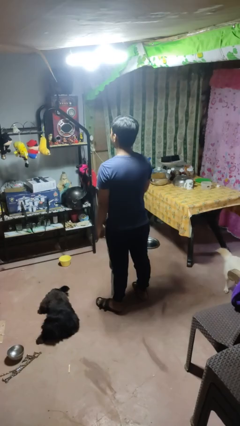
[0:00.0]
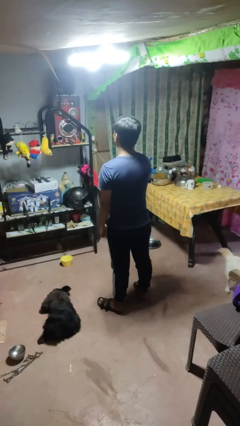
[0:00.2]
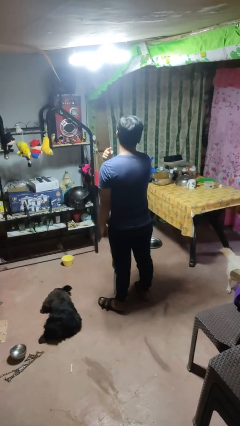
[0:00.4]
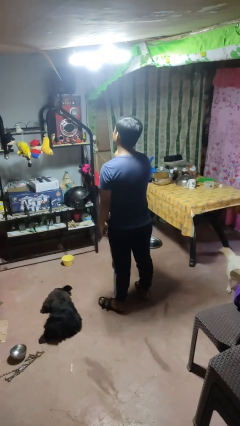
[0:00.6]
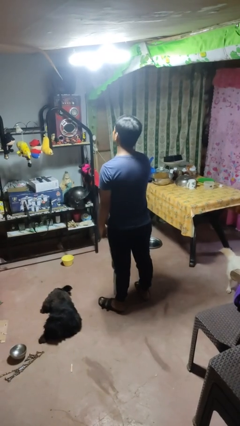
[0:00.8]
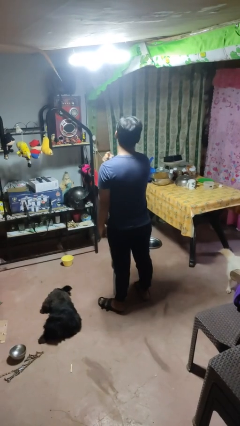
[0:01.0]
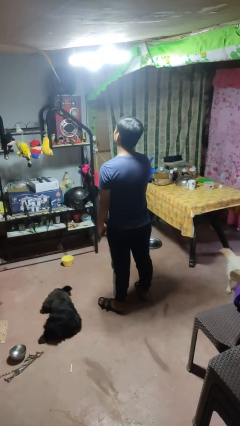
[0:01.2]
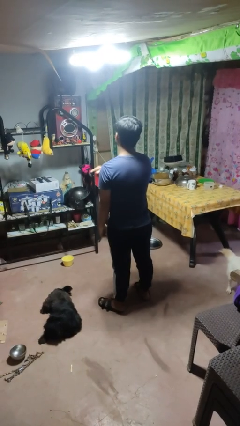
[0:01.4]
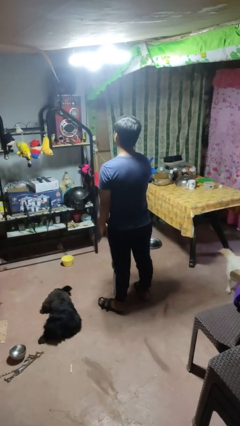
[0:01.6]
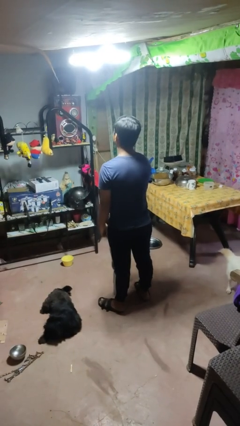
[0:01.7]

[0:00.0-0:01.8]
person gestures cut

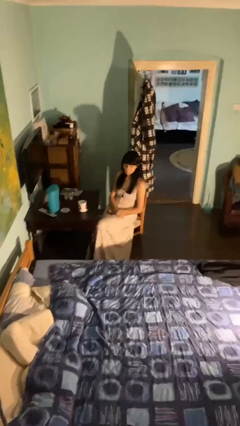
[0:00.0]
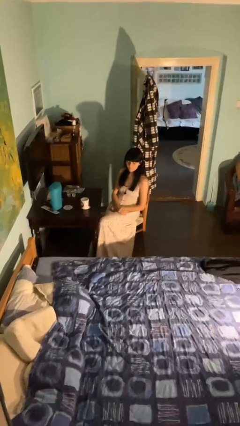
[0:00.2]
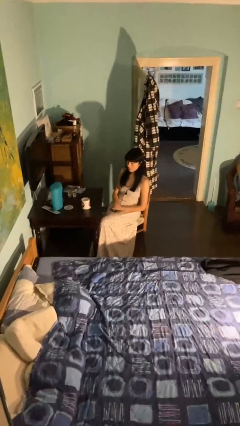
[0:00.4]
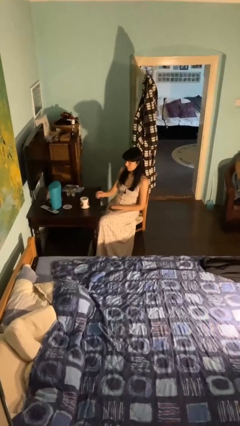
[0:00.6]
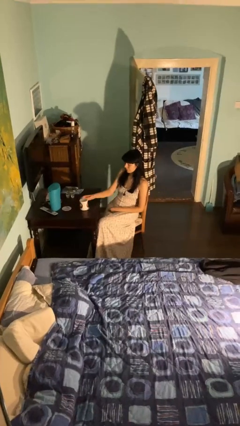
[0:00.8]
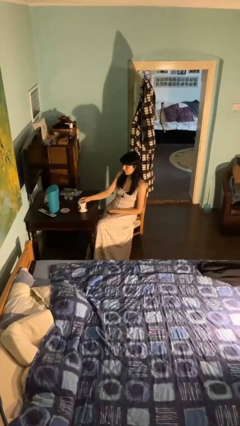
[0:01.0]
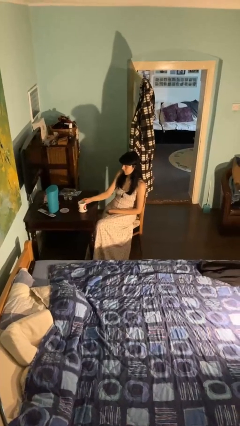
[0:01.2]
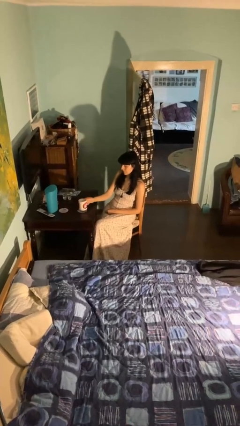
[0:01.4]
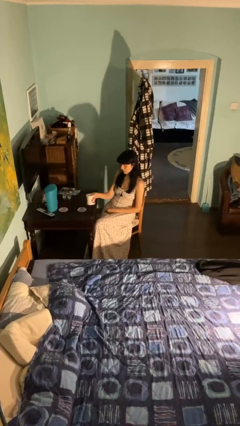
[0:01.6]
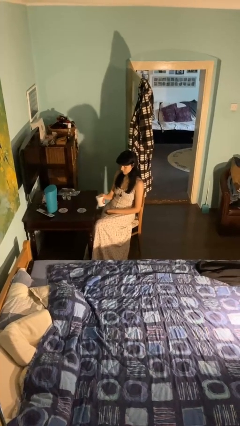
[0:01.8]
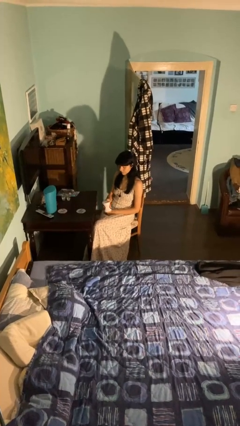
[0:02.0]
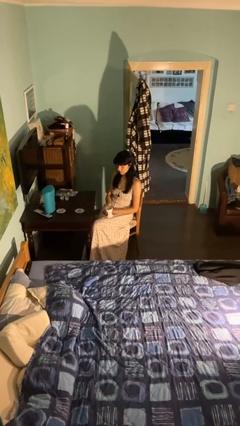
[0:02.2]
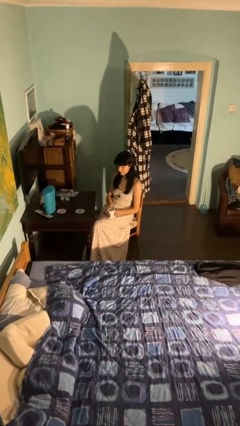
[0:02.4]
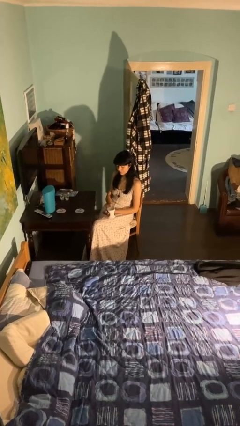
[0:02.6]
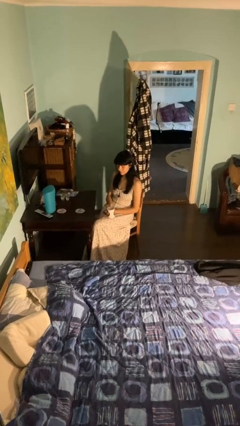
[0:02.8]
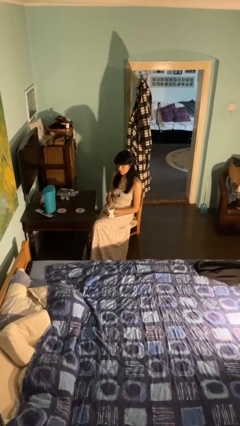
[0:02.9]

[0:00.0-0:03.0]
person picks up object from table

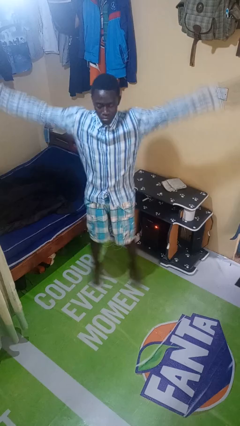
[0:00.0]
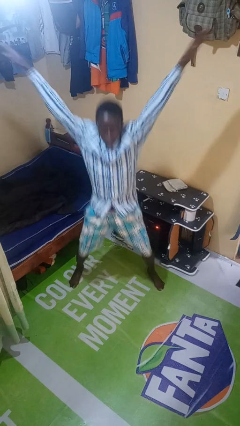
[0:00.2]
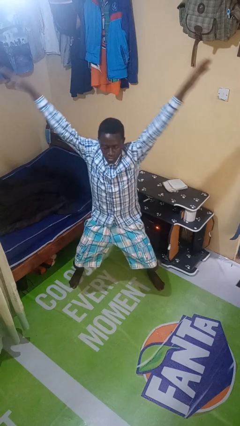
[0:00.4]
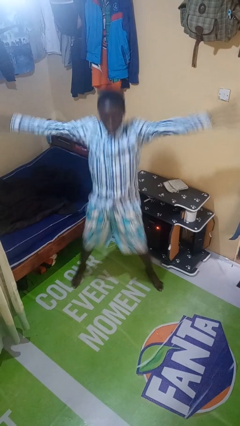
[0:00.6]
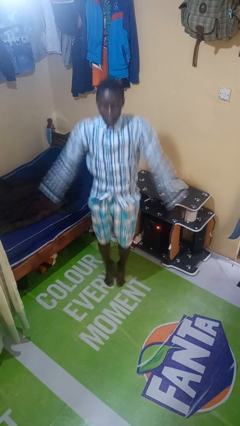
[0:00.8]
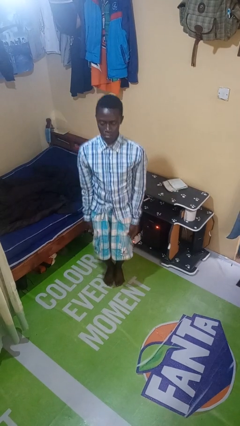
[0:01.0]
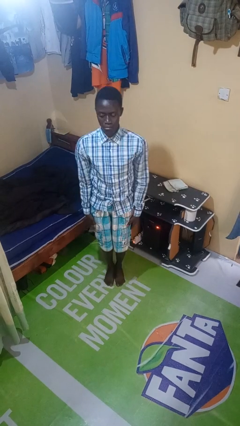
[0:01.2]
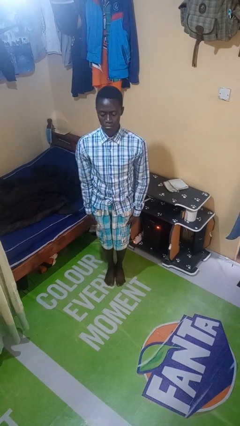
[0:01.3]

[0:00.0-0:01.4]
person exercises with jumping jacks

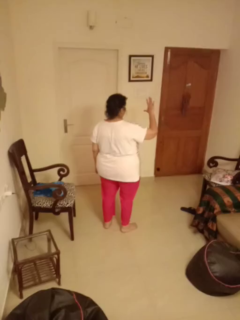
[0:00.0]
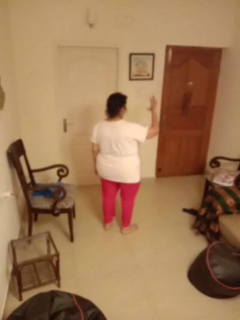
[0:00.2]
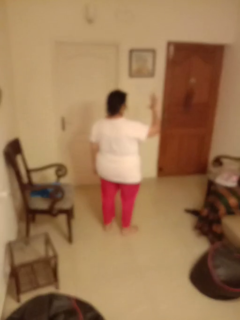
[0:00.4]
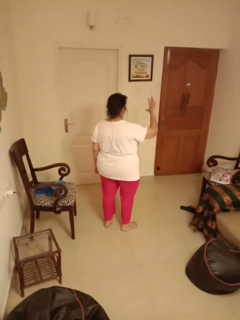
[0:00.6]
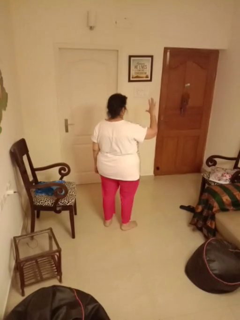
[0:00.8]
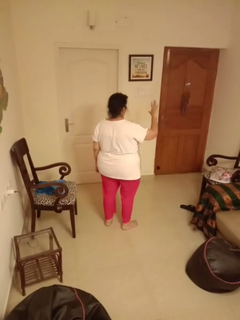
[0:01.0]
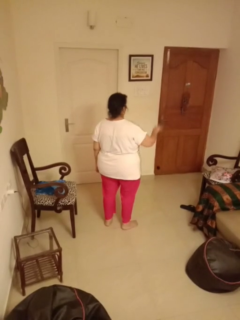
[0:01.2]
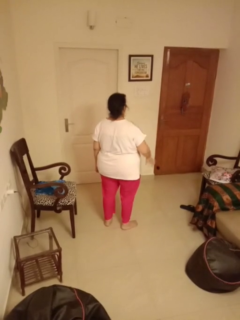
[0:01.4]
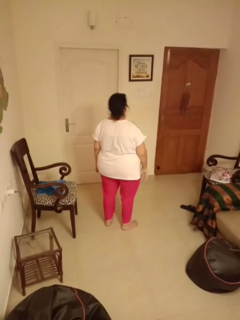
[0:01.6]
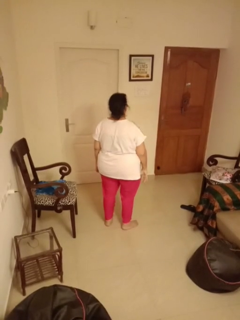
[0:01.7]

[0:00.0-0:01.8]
person gestures number five

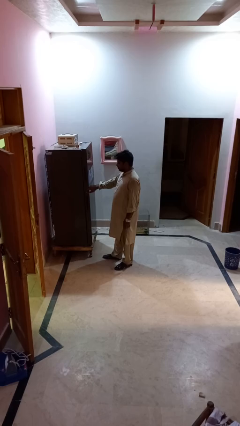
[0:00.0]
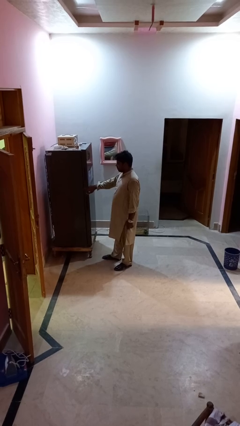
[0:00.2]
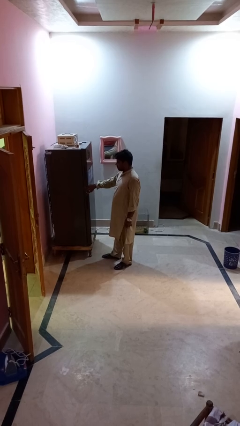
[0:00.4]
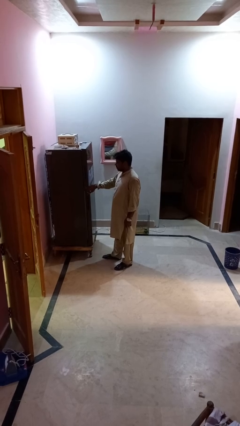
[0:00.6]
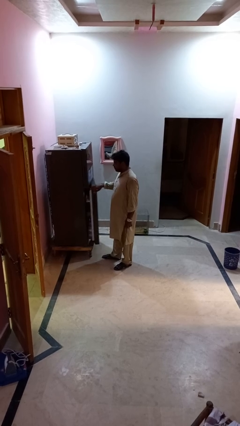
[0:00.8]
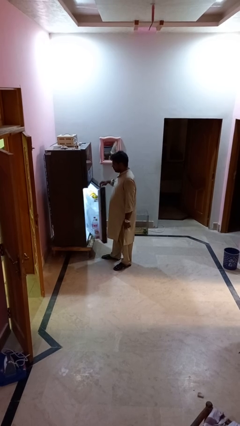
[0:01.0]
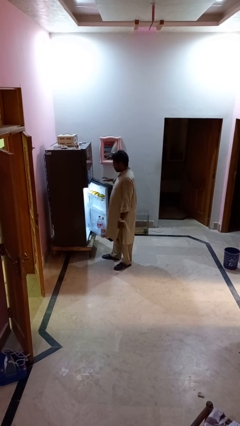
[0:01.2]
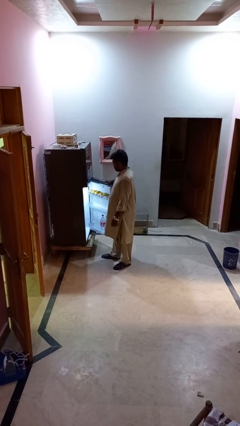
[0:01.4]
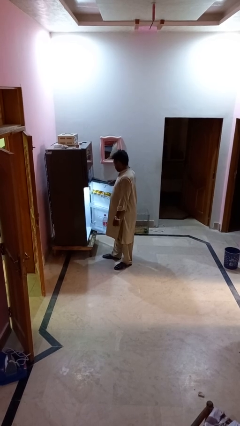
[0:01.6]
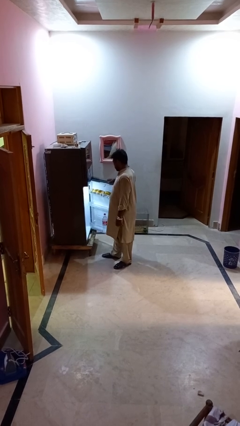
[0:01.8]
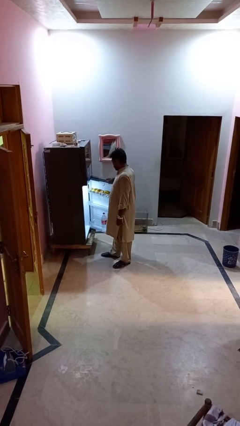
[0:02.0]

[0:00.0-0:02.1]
person opens refrigerator

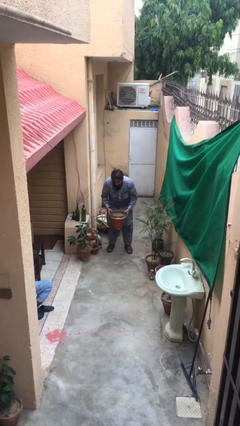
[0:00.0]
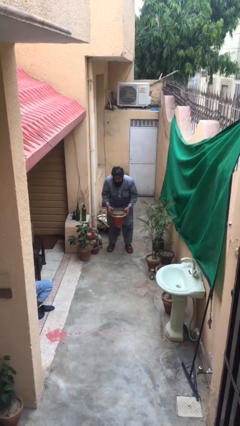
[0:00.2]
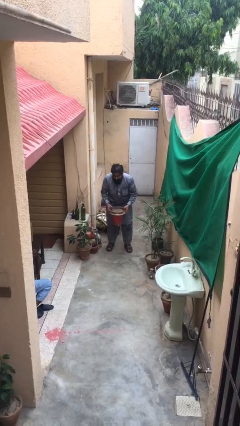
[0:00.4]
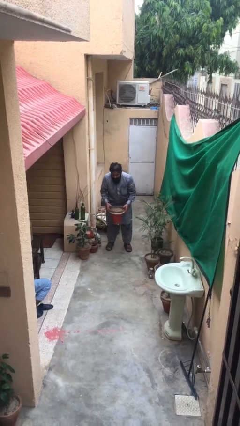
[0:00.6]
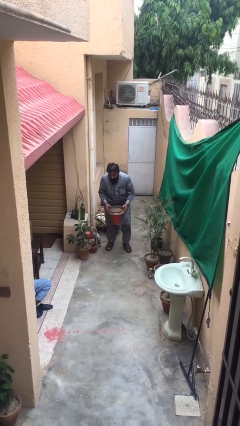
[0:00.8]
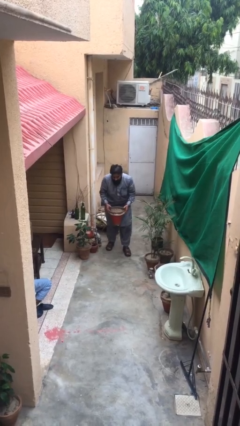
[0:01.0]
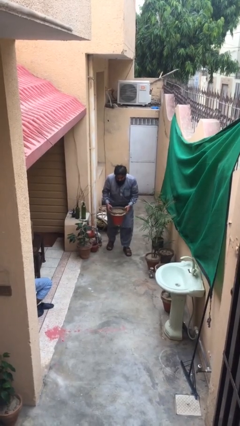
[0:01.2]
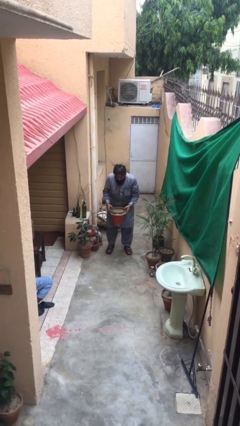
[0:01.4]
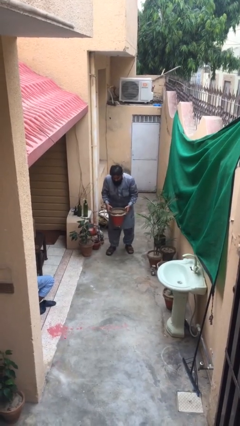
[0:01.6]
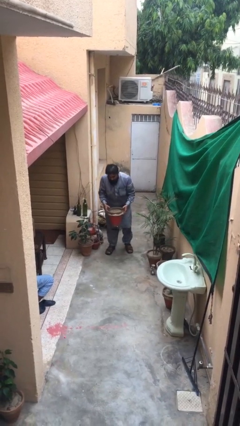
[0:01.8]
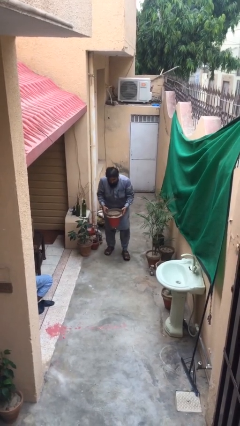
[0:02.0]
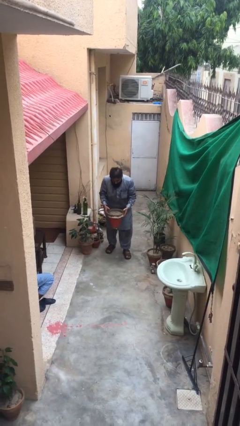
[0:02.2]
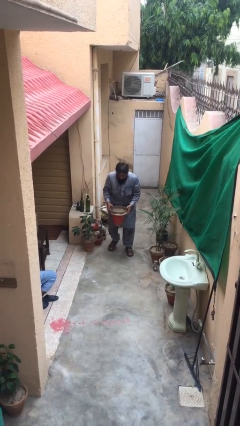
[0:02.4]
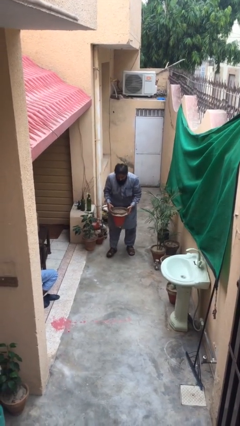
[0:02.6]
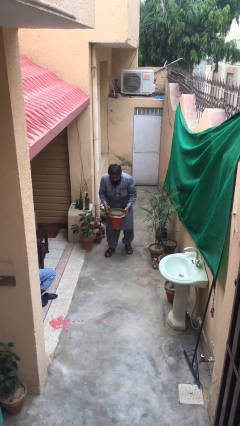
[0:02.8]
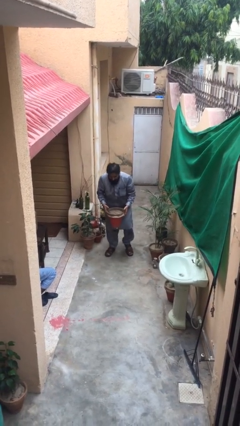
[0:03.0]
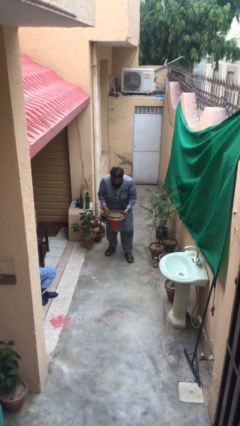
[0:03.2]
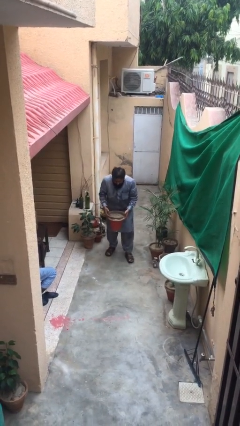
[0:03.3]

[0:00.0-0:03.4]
person carries heavy object

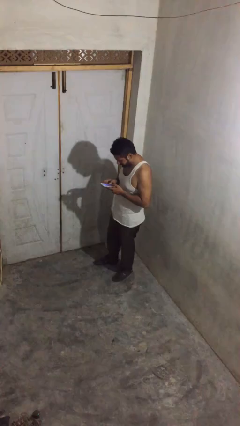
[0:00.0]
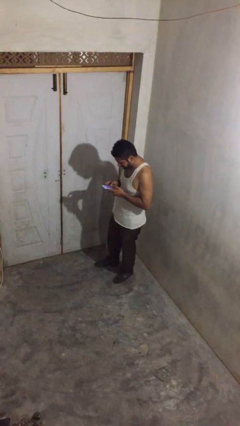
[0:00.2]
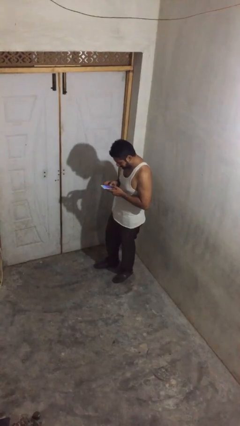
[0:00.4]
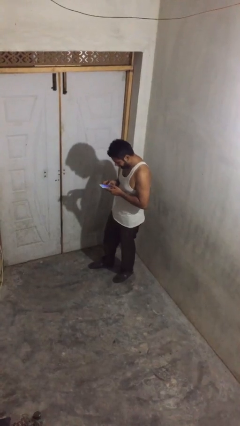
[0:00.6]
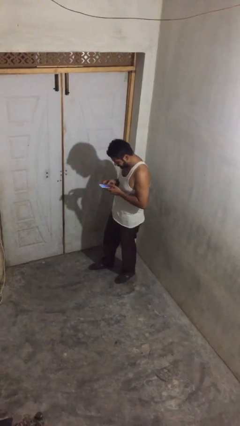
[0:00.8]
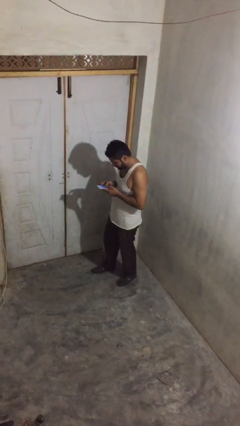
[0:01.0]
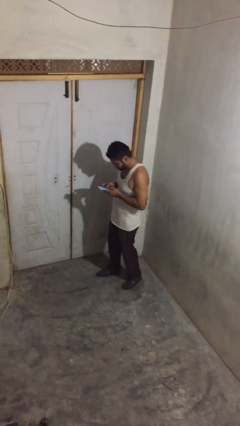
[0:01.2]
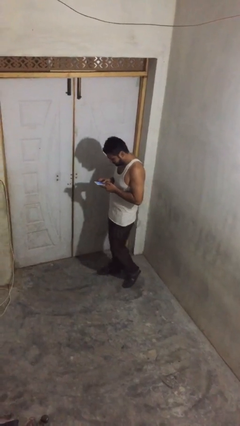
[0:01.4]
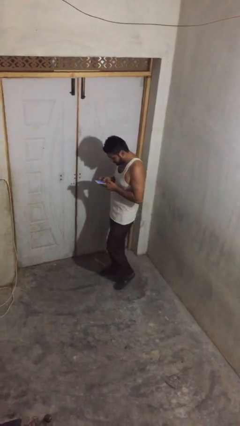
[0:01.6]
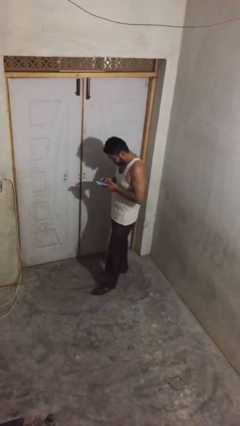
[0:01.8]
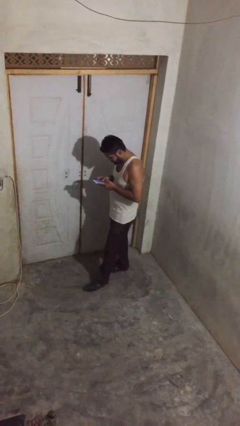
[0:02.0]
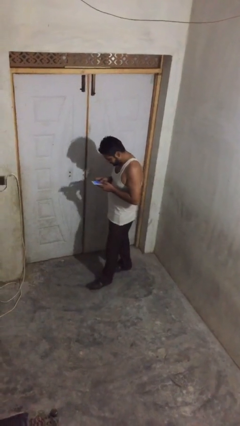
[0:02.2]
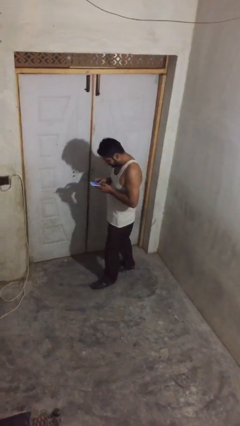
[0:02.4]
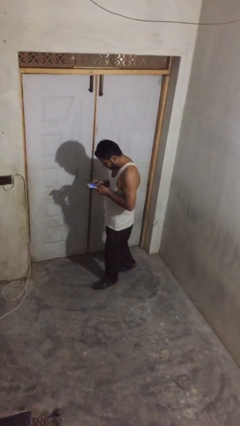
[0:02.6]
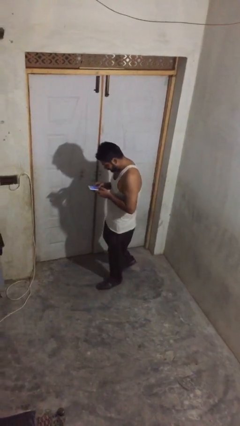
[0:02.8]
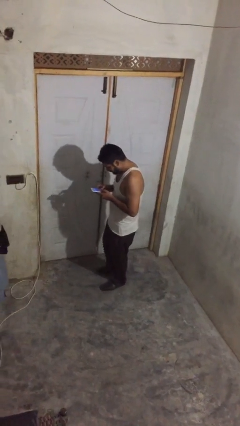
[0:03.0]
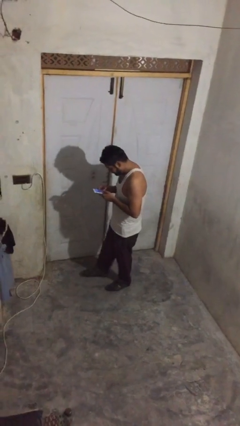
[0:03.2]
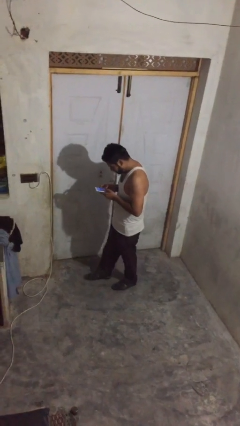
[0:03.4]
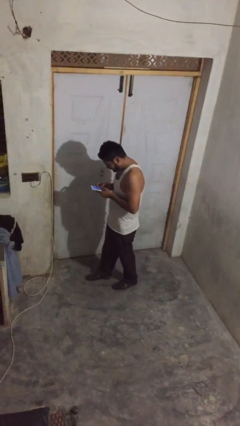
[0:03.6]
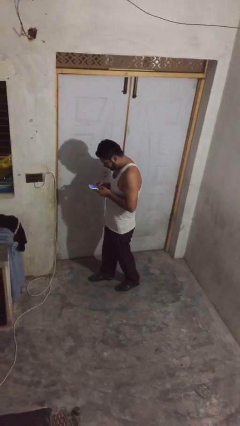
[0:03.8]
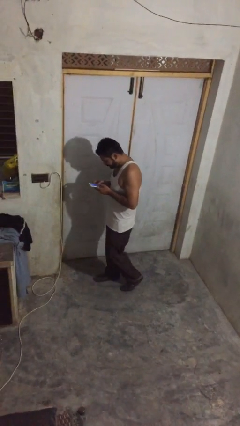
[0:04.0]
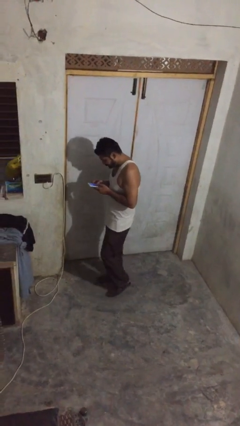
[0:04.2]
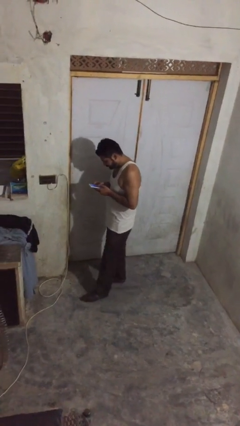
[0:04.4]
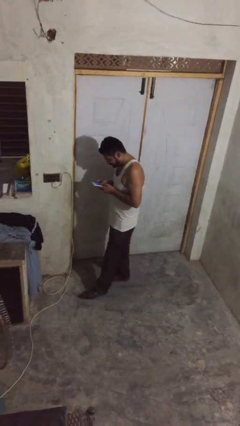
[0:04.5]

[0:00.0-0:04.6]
person texts on phone
